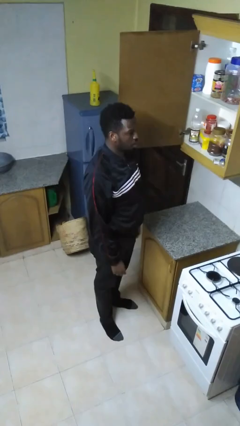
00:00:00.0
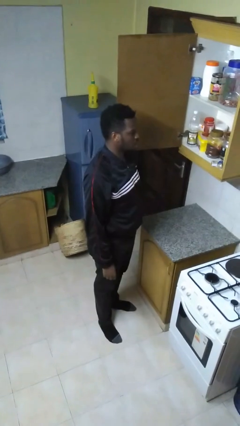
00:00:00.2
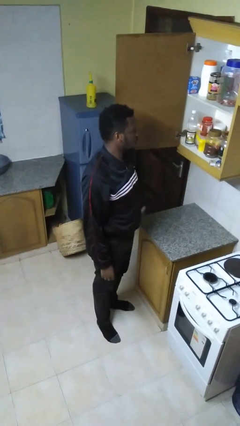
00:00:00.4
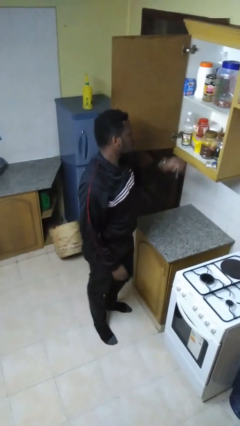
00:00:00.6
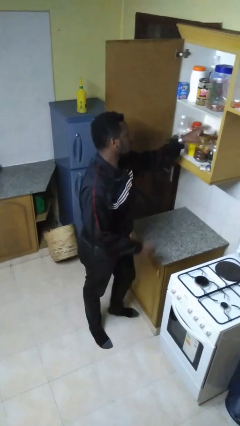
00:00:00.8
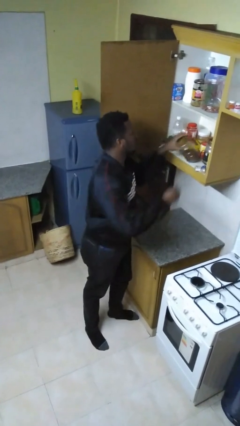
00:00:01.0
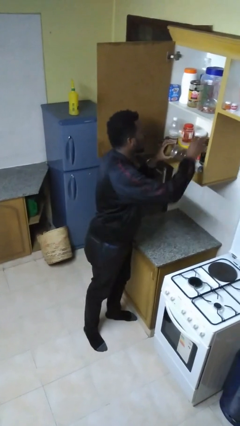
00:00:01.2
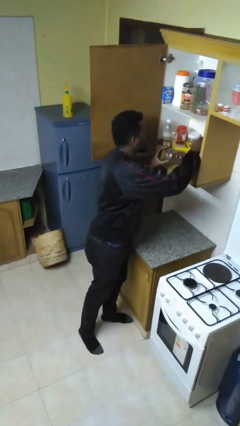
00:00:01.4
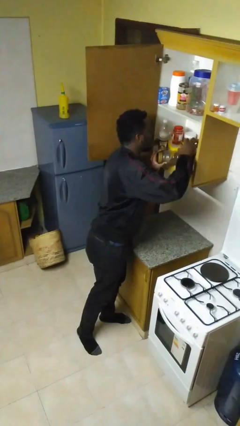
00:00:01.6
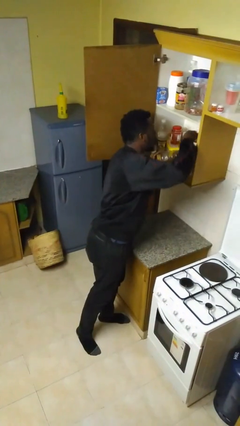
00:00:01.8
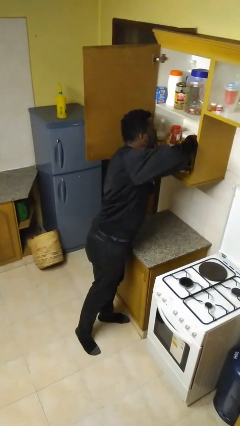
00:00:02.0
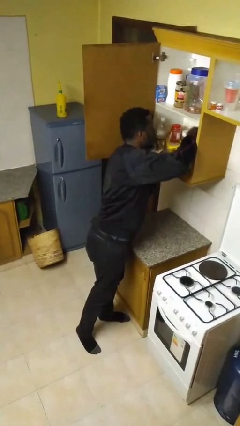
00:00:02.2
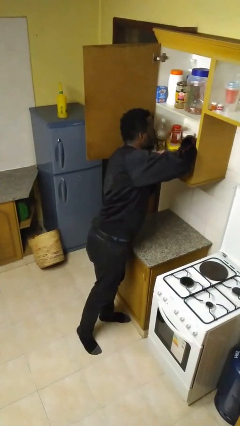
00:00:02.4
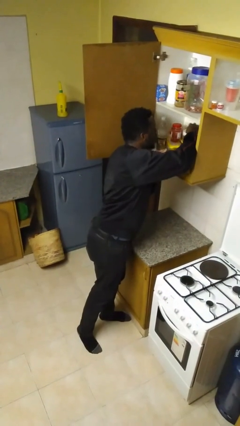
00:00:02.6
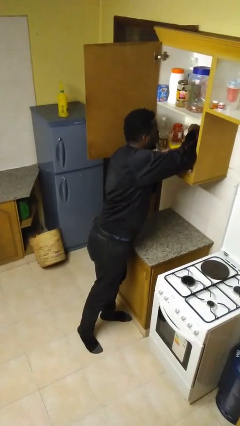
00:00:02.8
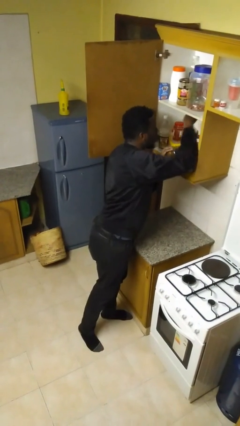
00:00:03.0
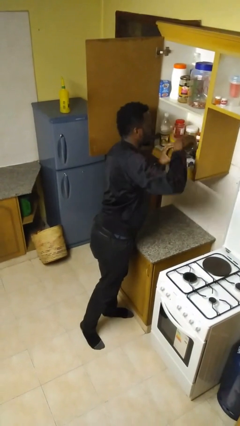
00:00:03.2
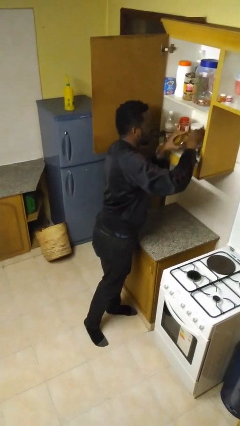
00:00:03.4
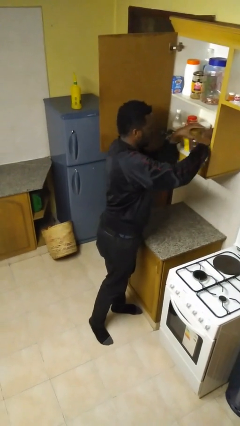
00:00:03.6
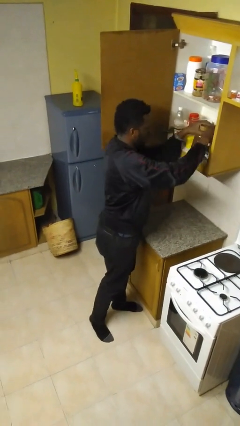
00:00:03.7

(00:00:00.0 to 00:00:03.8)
person searches in cabinet

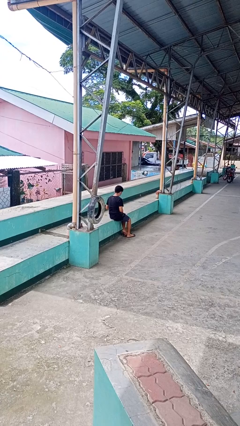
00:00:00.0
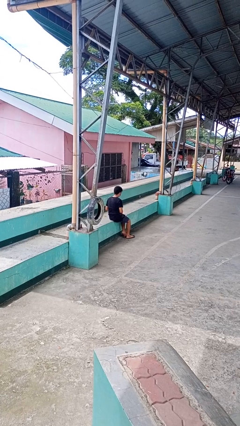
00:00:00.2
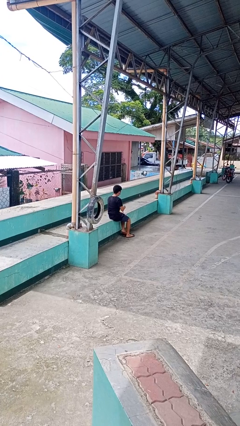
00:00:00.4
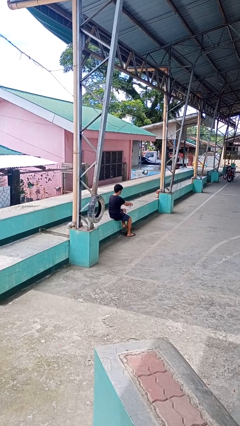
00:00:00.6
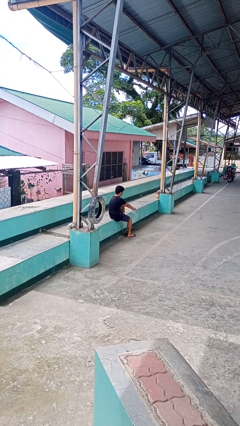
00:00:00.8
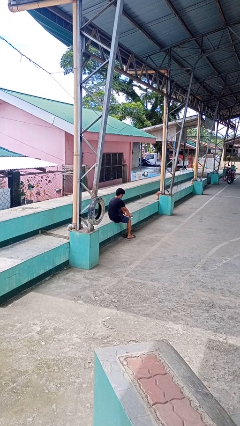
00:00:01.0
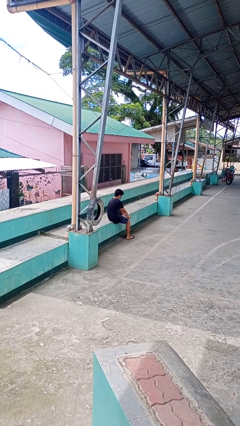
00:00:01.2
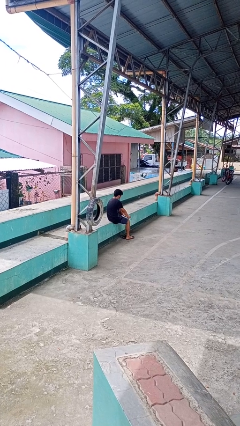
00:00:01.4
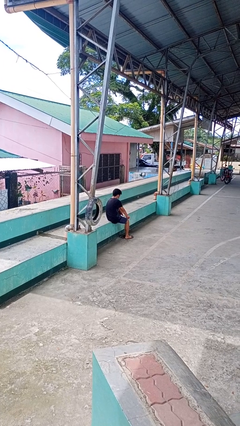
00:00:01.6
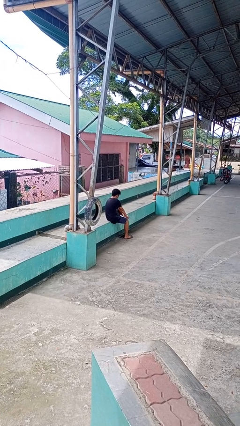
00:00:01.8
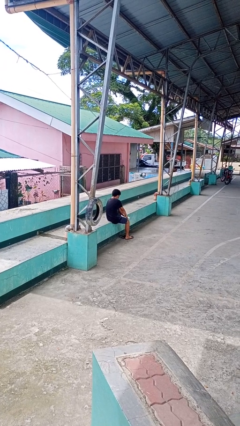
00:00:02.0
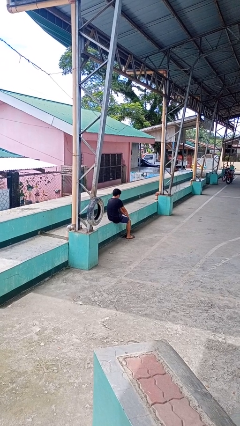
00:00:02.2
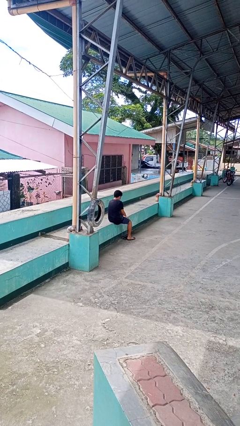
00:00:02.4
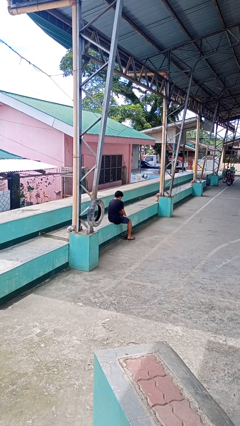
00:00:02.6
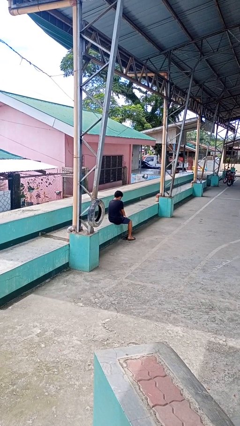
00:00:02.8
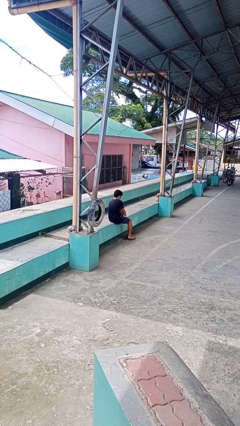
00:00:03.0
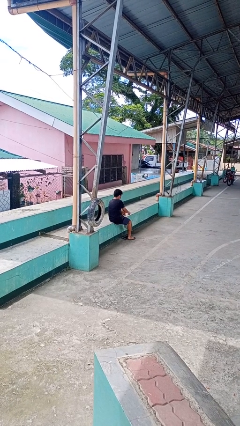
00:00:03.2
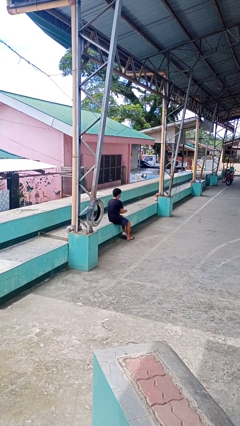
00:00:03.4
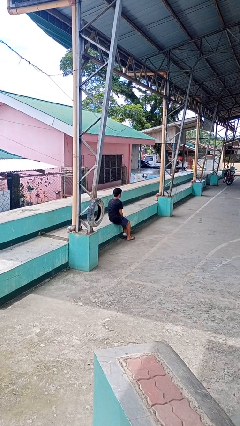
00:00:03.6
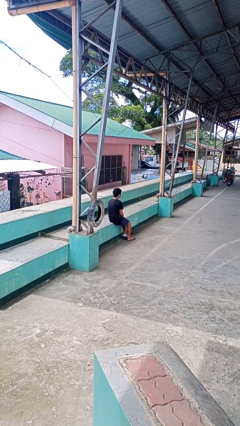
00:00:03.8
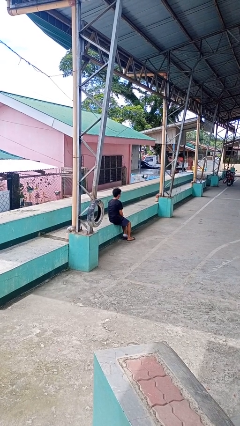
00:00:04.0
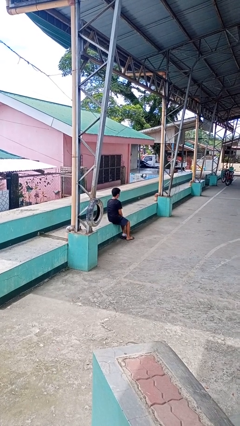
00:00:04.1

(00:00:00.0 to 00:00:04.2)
person puts on socks

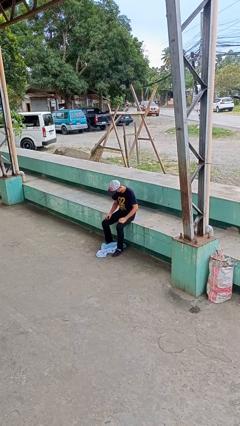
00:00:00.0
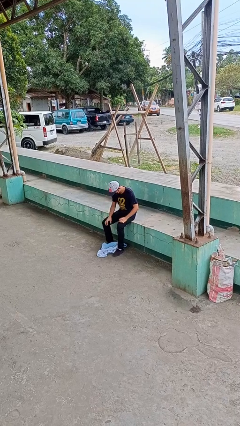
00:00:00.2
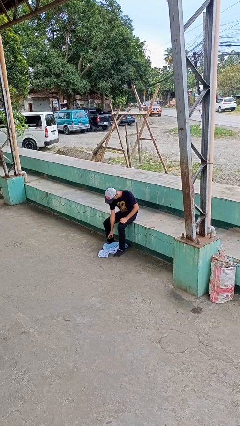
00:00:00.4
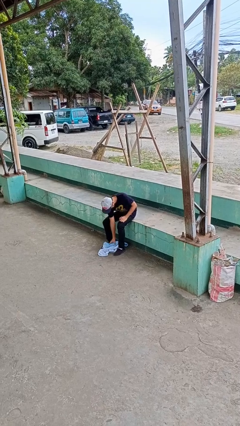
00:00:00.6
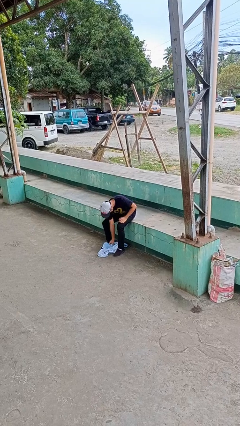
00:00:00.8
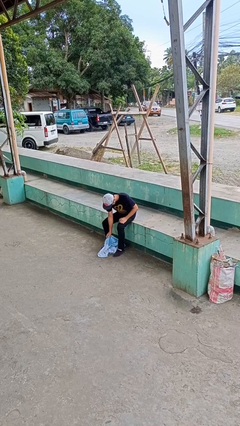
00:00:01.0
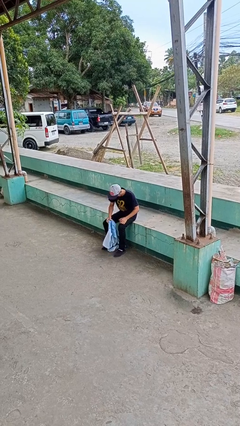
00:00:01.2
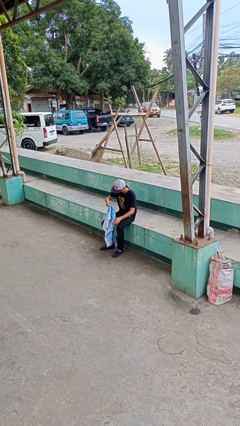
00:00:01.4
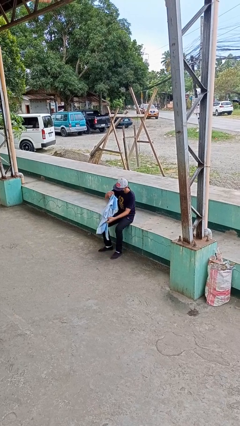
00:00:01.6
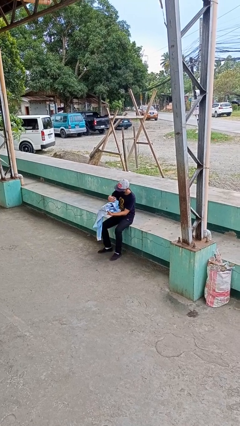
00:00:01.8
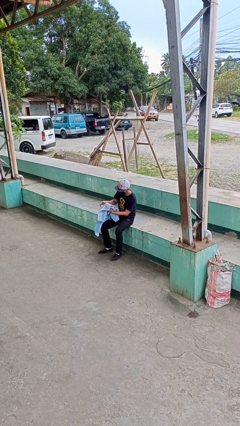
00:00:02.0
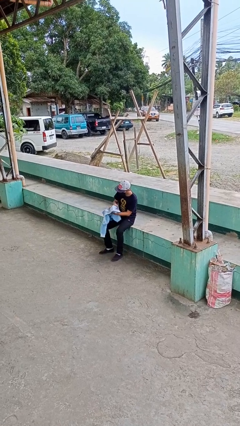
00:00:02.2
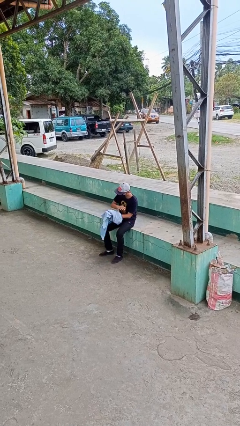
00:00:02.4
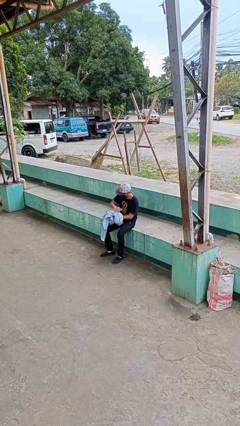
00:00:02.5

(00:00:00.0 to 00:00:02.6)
person picks up object from floor

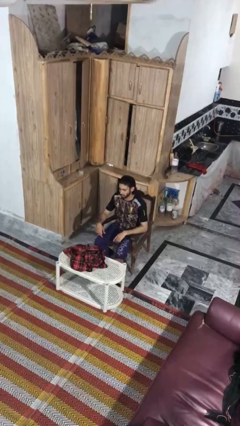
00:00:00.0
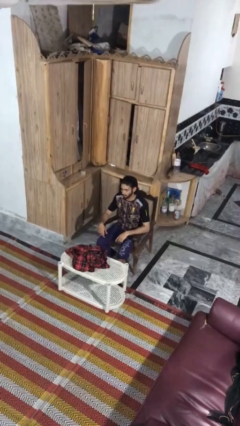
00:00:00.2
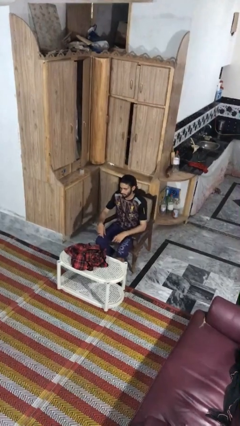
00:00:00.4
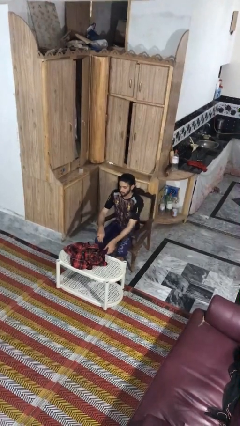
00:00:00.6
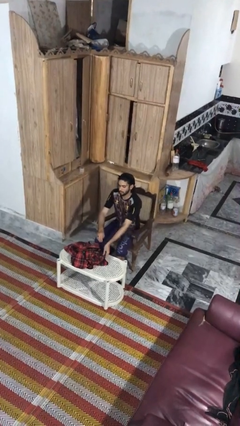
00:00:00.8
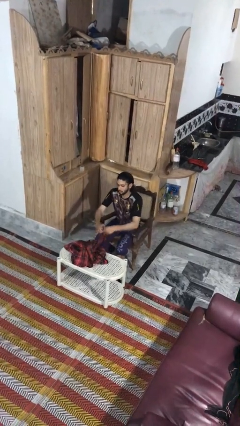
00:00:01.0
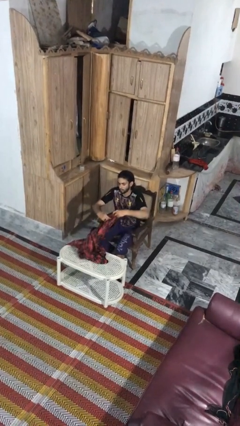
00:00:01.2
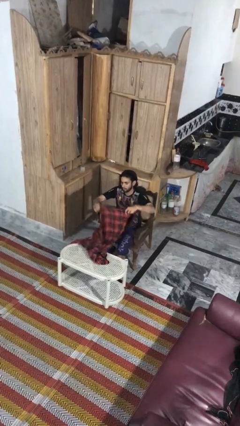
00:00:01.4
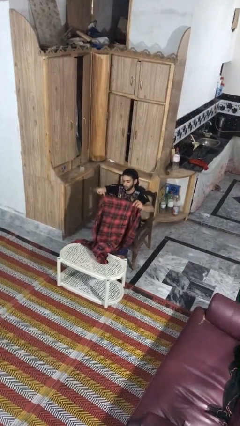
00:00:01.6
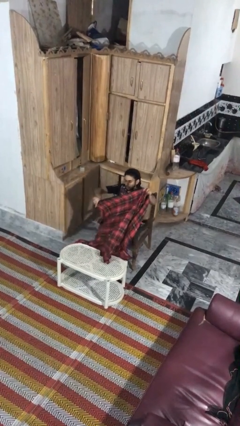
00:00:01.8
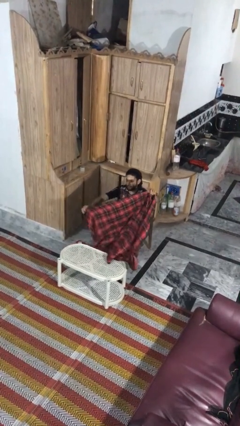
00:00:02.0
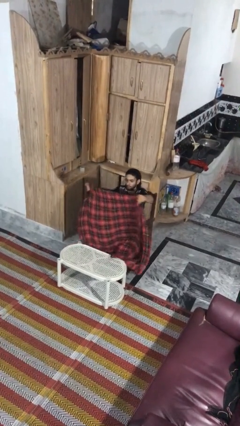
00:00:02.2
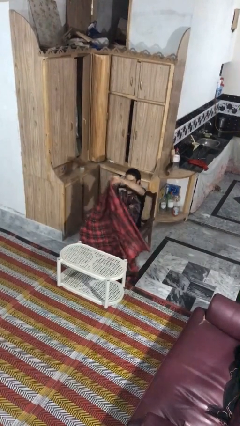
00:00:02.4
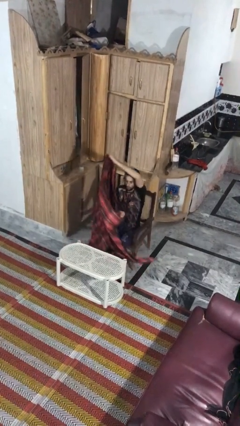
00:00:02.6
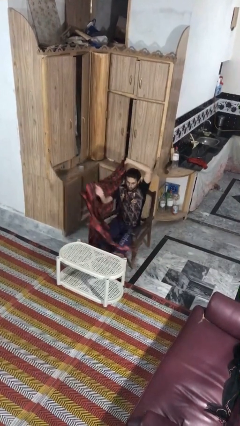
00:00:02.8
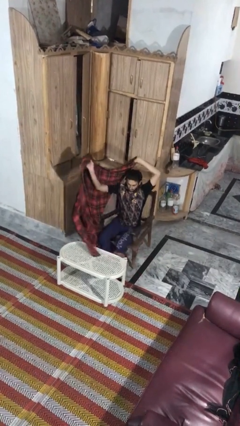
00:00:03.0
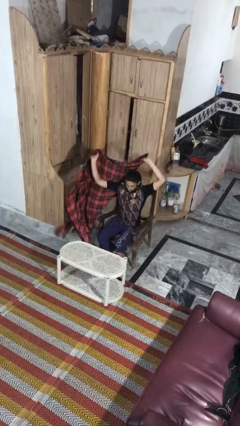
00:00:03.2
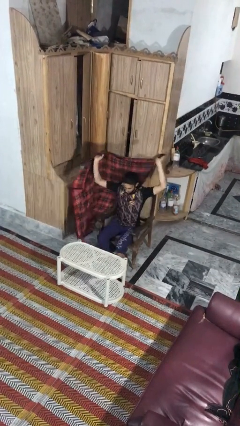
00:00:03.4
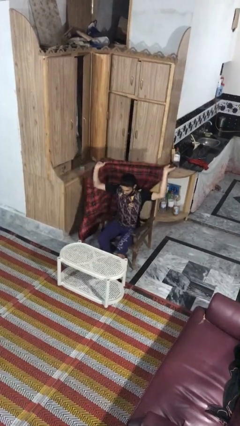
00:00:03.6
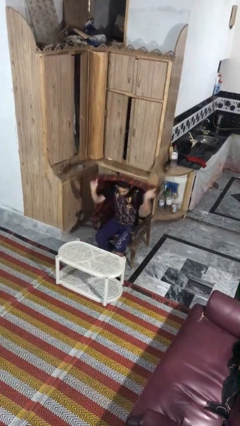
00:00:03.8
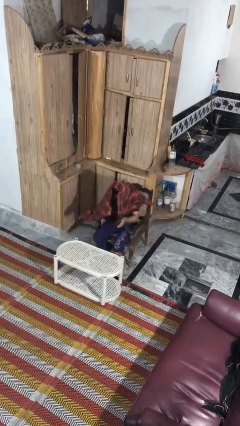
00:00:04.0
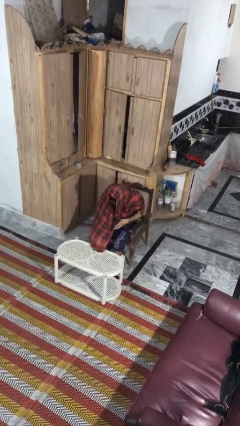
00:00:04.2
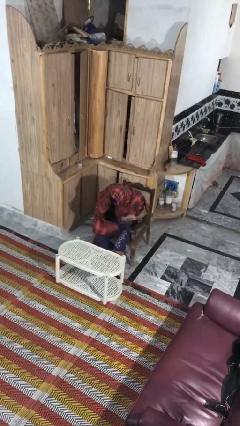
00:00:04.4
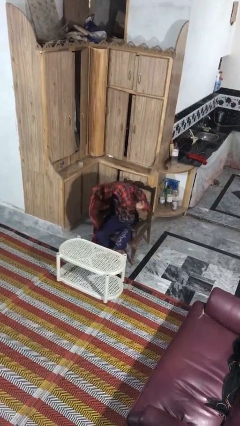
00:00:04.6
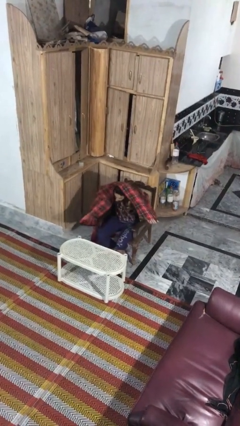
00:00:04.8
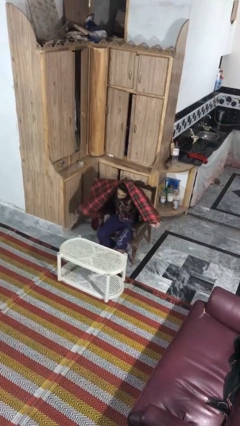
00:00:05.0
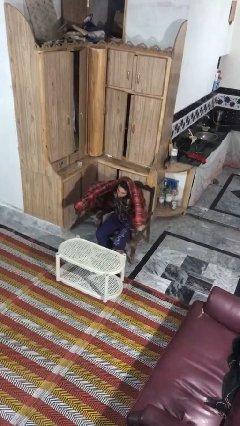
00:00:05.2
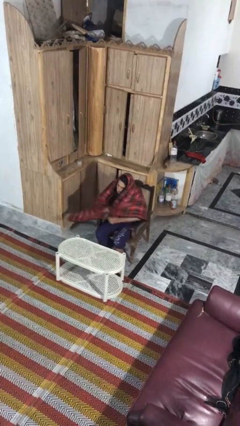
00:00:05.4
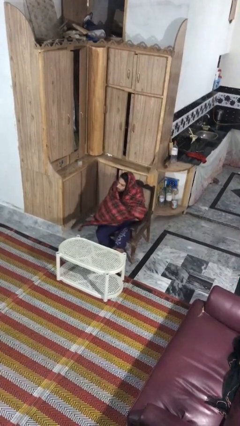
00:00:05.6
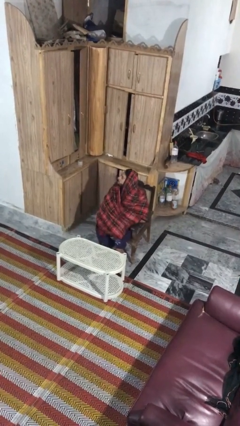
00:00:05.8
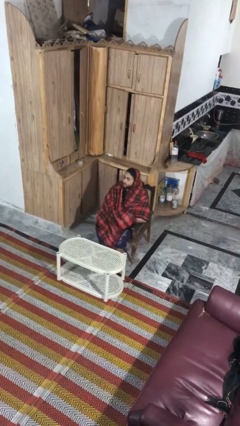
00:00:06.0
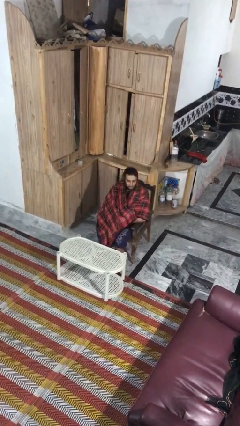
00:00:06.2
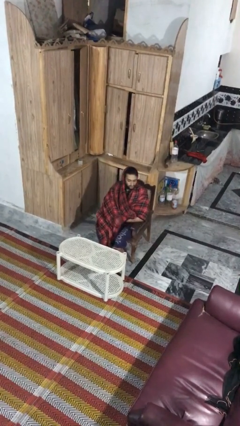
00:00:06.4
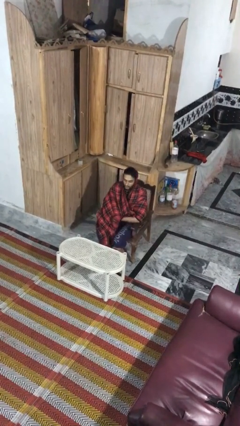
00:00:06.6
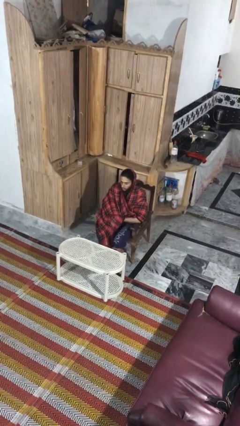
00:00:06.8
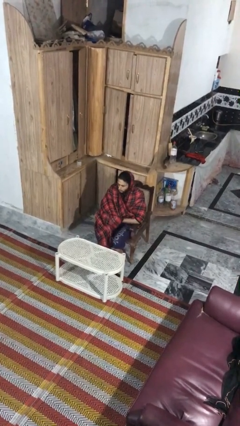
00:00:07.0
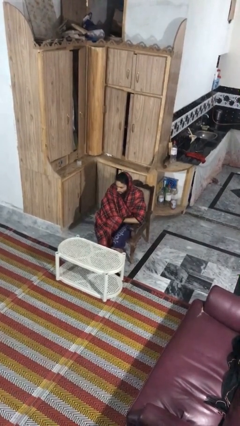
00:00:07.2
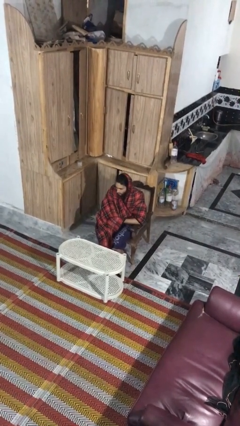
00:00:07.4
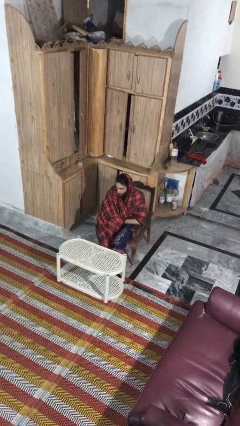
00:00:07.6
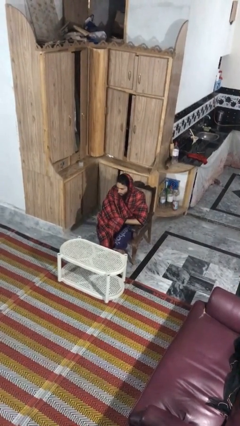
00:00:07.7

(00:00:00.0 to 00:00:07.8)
person covers with blanket
